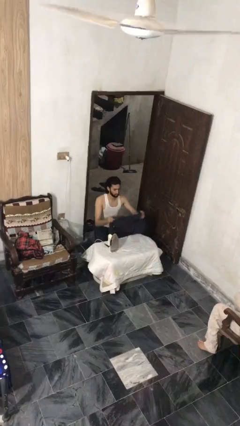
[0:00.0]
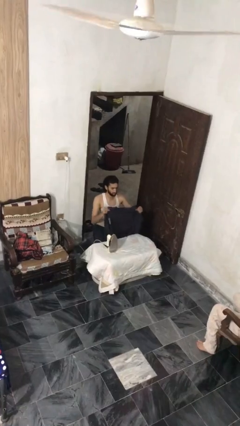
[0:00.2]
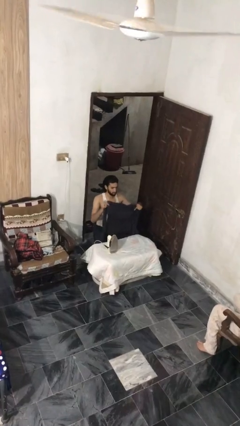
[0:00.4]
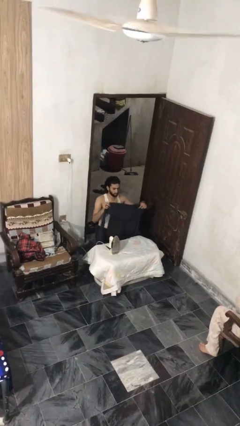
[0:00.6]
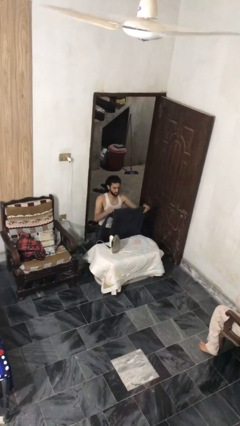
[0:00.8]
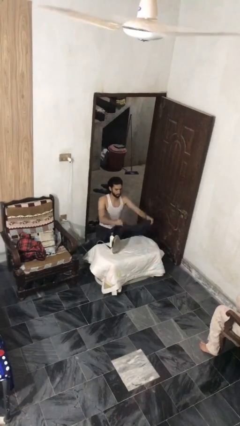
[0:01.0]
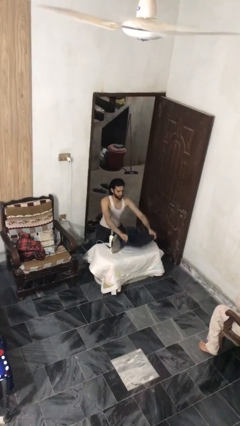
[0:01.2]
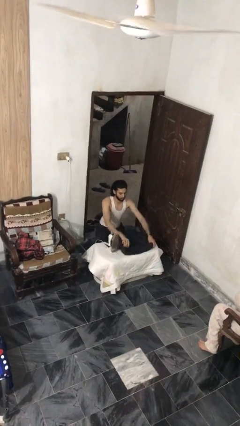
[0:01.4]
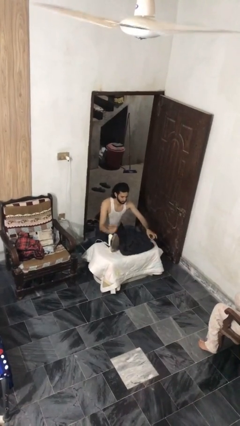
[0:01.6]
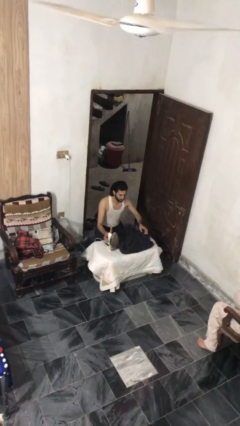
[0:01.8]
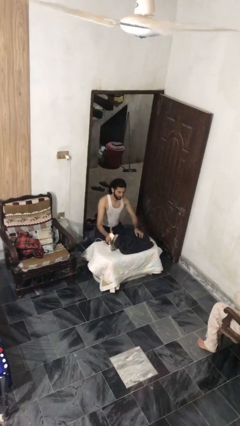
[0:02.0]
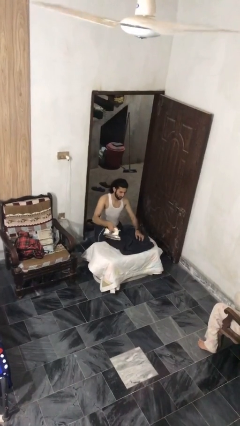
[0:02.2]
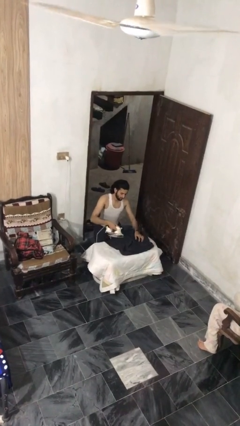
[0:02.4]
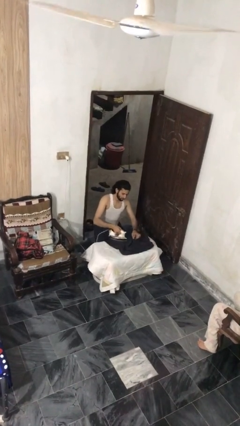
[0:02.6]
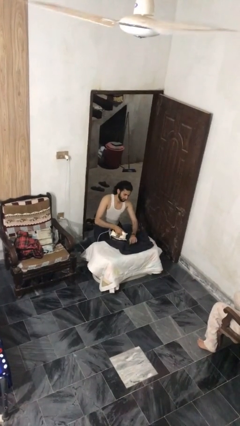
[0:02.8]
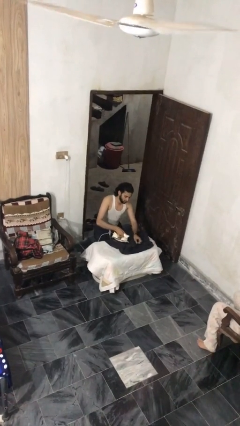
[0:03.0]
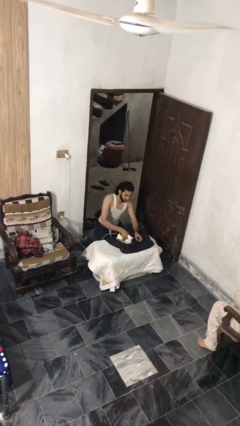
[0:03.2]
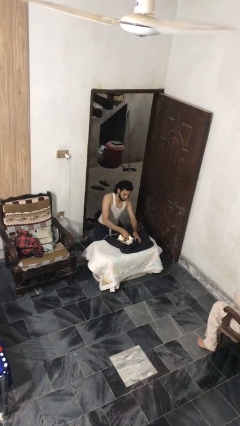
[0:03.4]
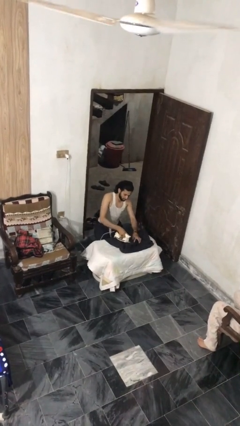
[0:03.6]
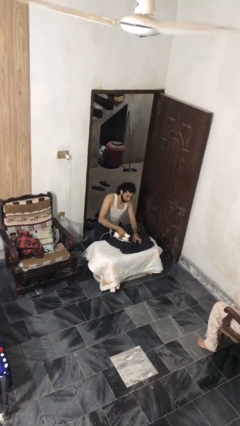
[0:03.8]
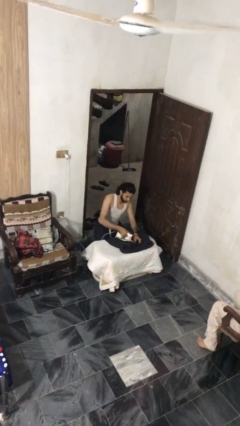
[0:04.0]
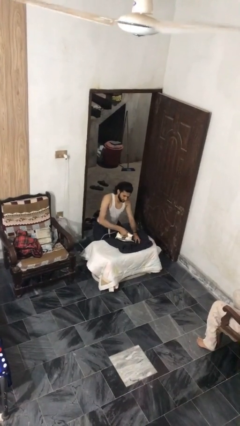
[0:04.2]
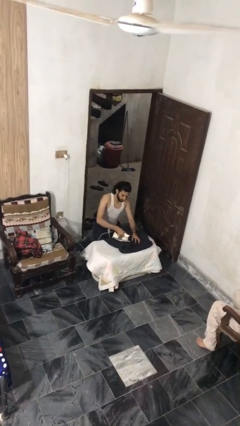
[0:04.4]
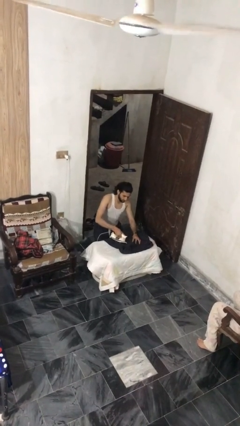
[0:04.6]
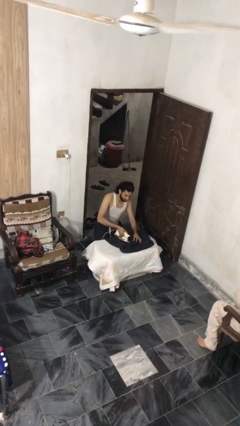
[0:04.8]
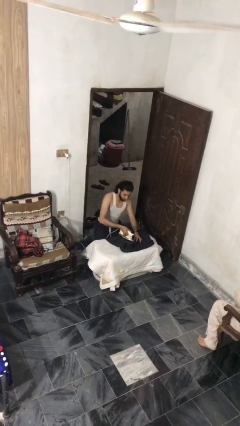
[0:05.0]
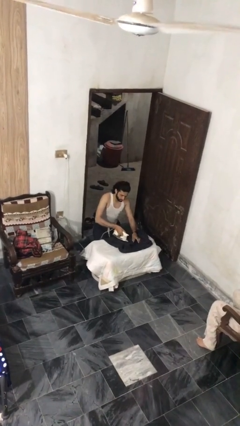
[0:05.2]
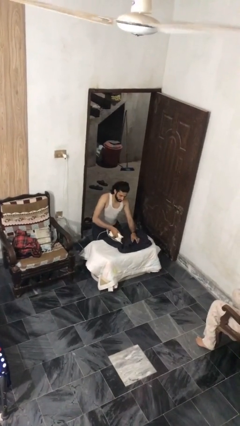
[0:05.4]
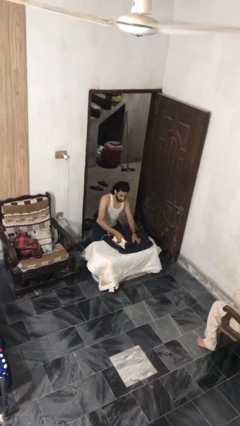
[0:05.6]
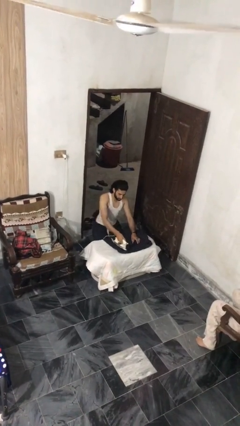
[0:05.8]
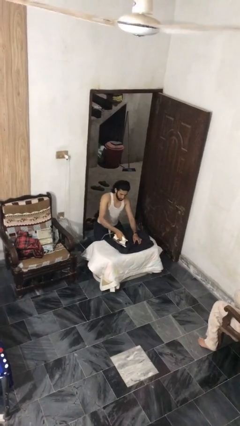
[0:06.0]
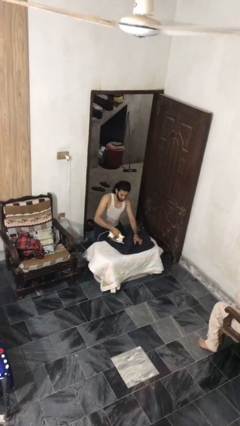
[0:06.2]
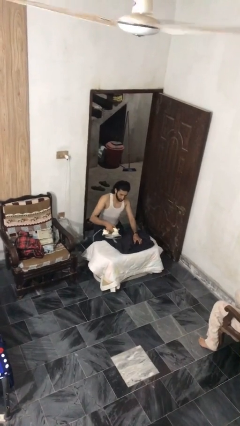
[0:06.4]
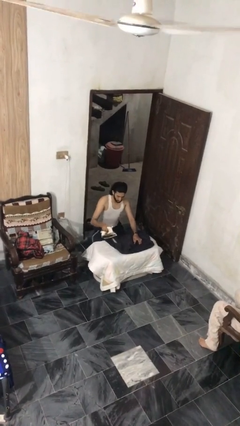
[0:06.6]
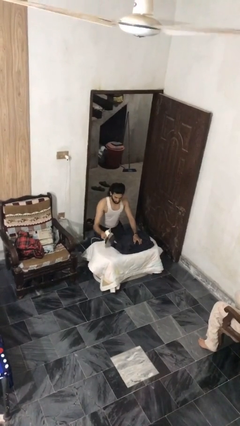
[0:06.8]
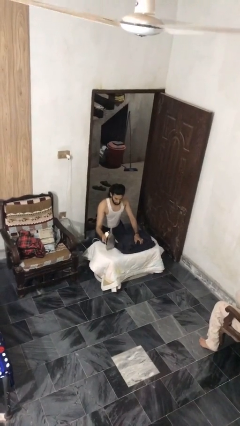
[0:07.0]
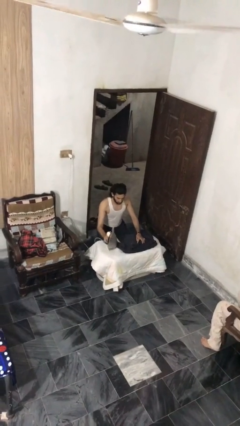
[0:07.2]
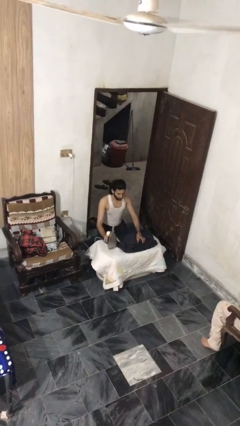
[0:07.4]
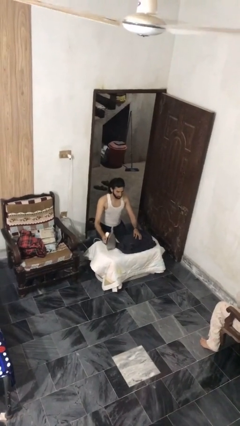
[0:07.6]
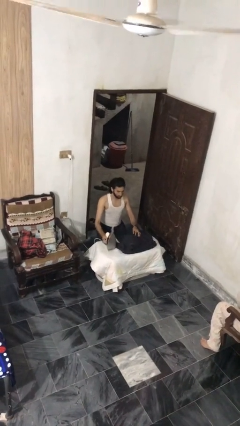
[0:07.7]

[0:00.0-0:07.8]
person irons clothes

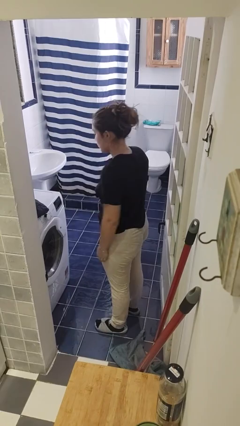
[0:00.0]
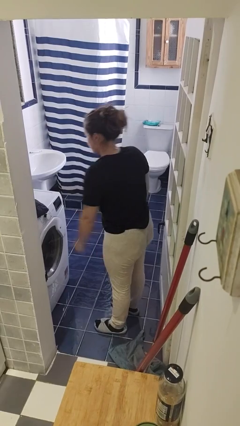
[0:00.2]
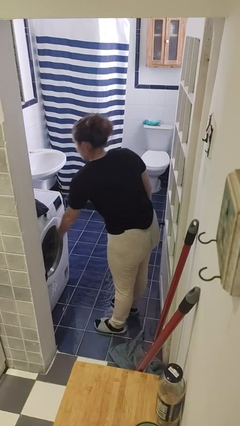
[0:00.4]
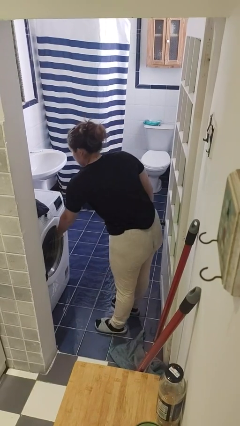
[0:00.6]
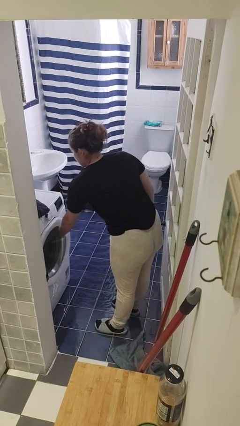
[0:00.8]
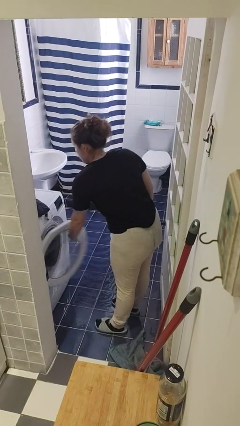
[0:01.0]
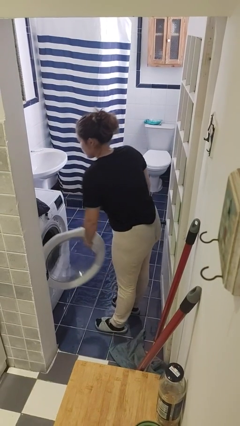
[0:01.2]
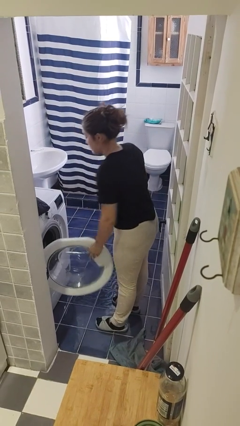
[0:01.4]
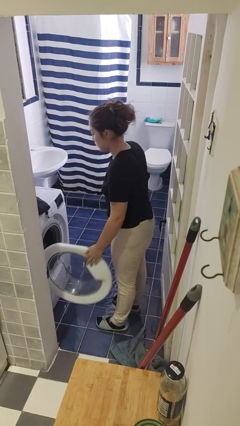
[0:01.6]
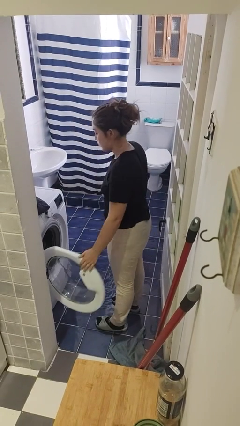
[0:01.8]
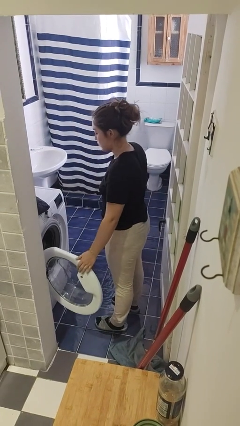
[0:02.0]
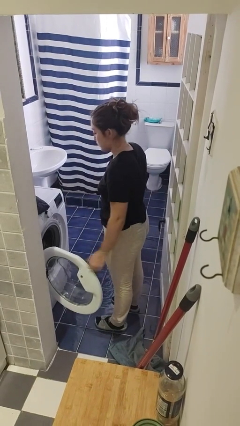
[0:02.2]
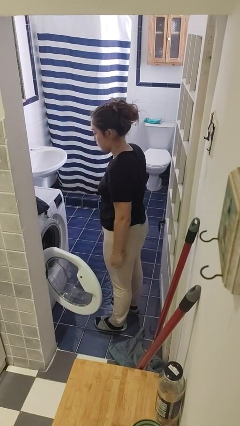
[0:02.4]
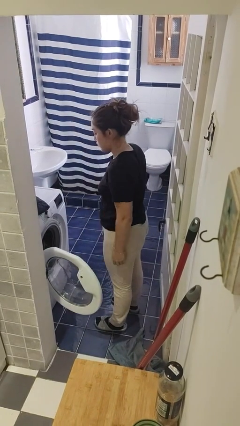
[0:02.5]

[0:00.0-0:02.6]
person opens clothes washer

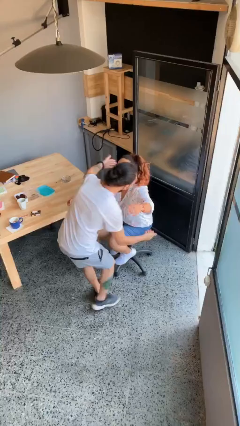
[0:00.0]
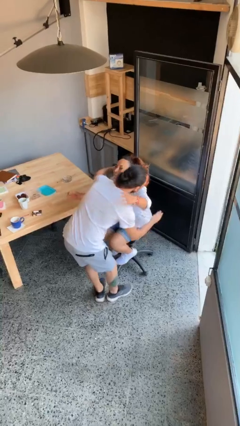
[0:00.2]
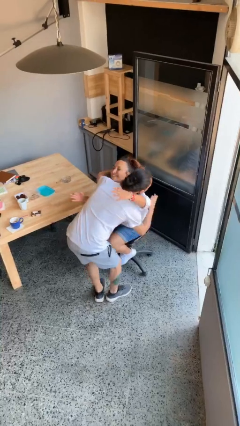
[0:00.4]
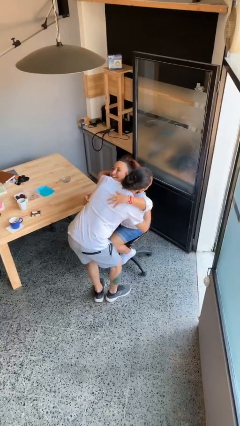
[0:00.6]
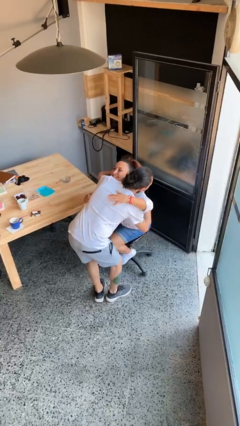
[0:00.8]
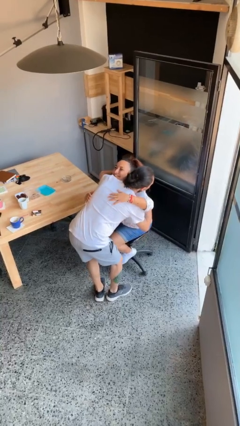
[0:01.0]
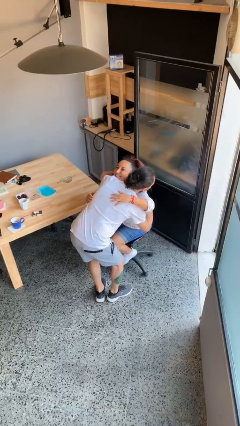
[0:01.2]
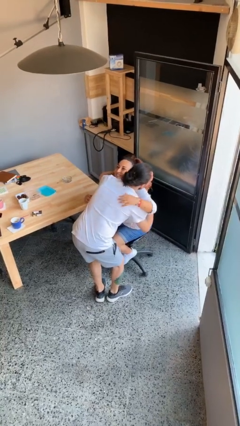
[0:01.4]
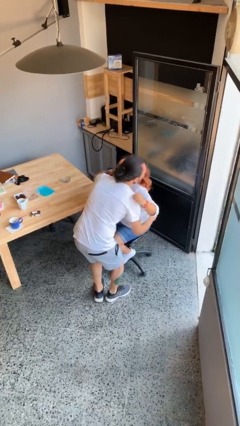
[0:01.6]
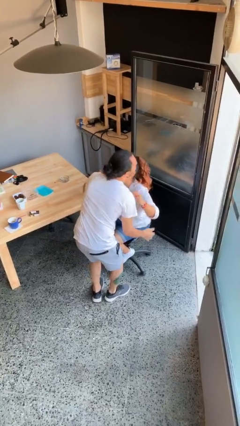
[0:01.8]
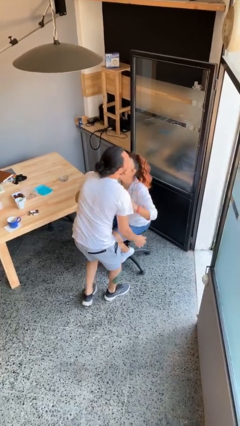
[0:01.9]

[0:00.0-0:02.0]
person embraces person

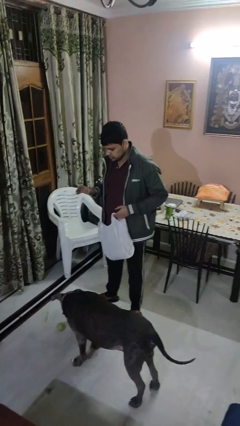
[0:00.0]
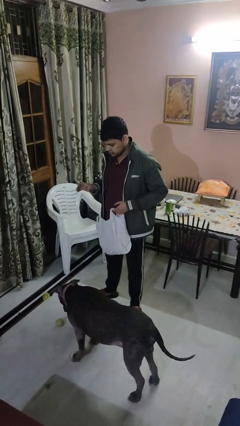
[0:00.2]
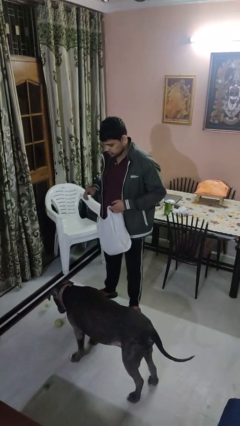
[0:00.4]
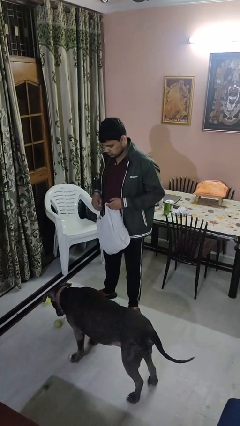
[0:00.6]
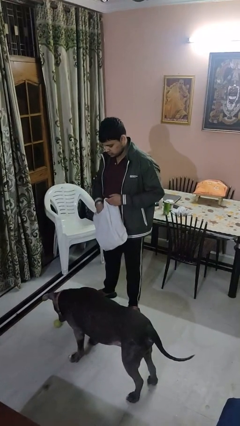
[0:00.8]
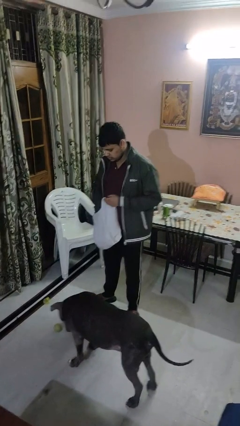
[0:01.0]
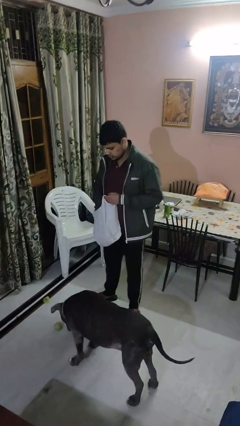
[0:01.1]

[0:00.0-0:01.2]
person throws object to dog

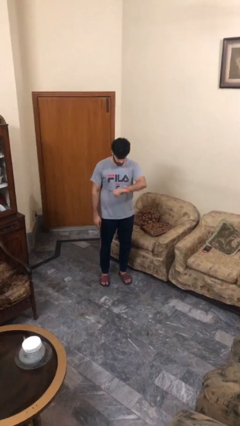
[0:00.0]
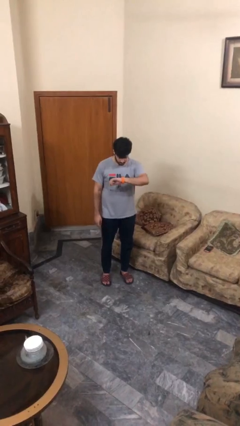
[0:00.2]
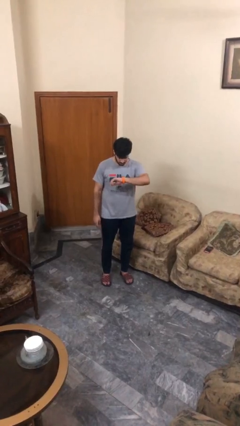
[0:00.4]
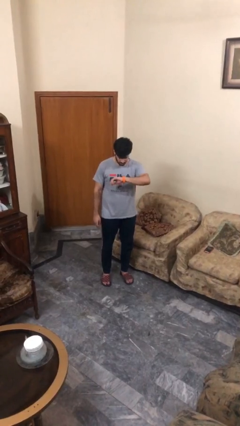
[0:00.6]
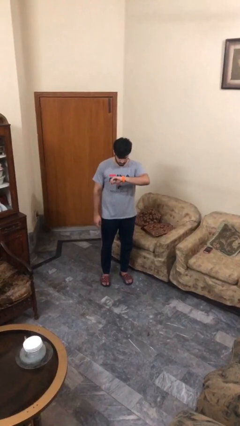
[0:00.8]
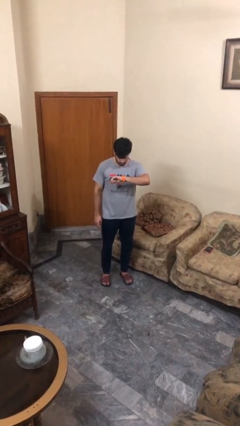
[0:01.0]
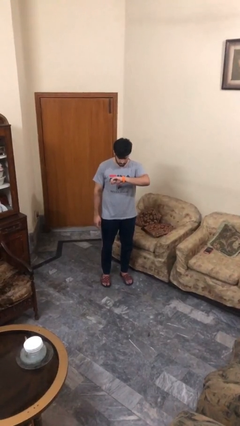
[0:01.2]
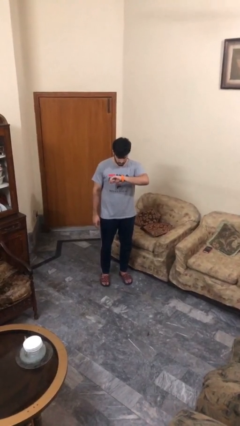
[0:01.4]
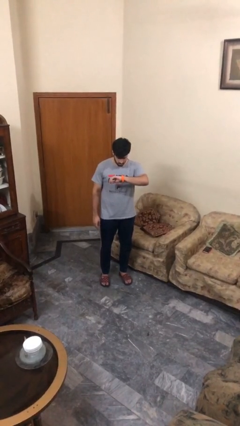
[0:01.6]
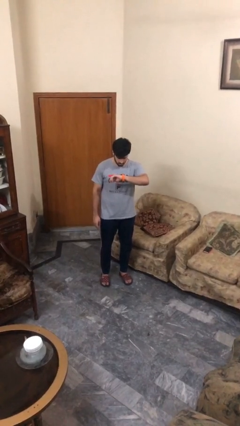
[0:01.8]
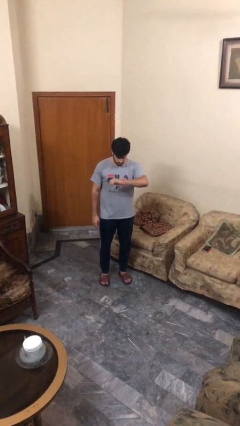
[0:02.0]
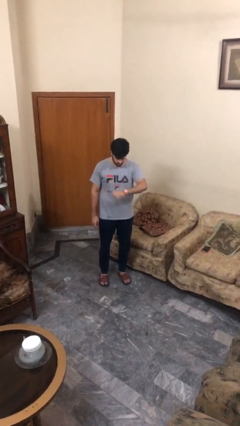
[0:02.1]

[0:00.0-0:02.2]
person looks at wristwatch

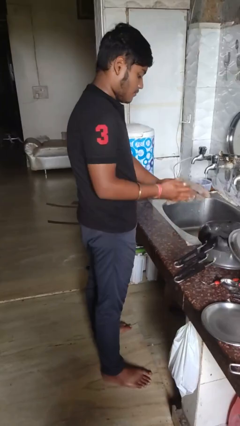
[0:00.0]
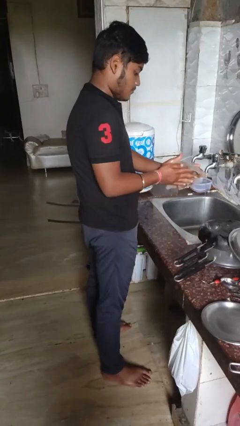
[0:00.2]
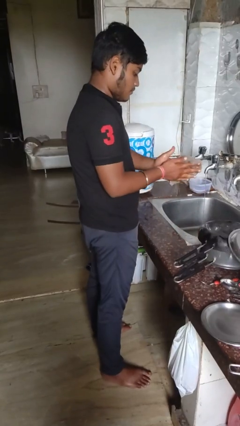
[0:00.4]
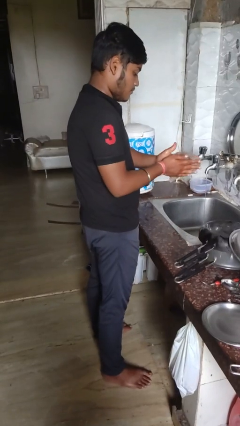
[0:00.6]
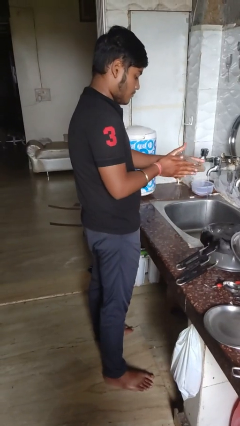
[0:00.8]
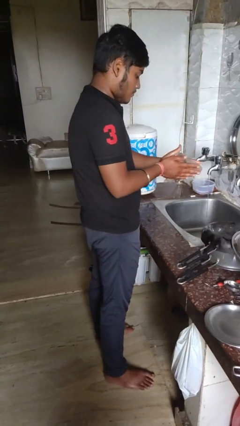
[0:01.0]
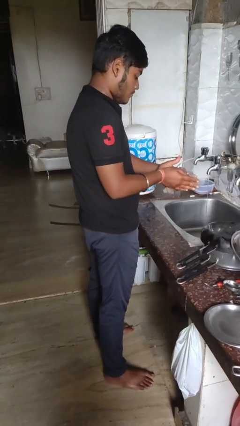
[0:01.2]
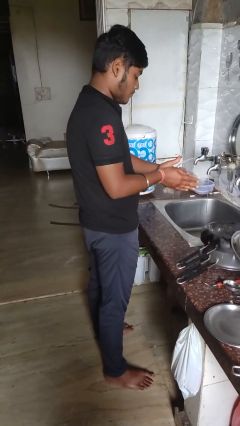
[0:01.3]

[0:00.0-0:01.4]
person dries hands with towel

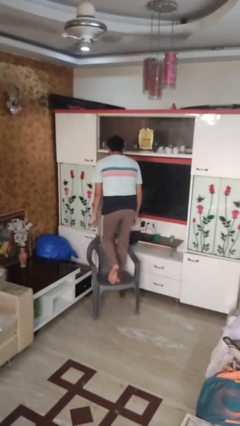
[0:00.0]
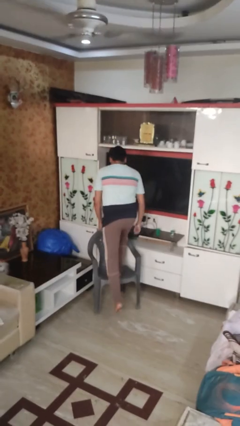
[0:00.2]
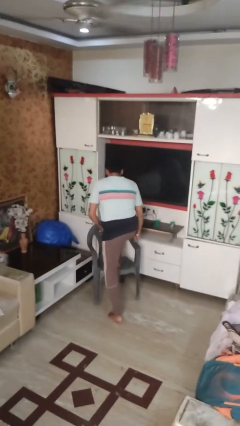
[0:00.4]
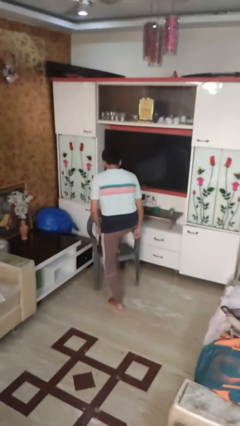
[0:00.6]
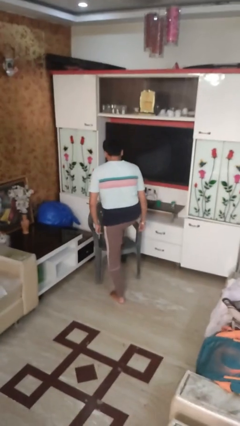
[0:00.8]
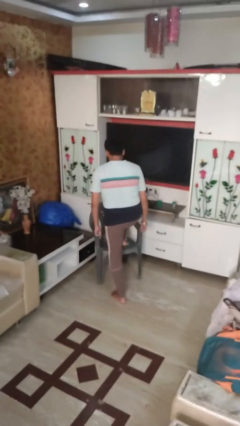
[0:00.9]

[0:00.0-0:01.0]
person climbs off chair
